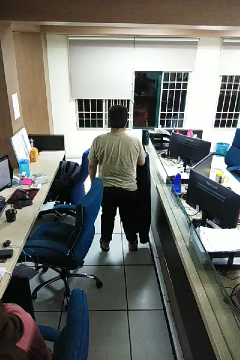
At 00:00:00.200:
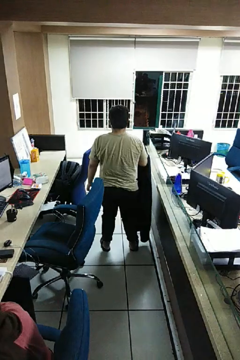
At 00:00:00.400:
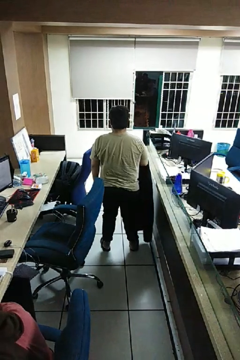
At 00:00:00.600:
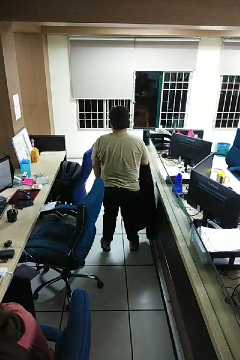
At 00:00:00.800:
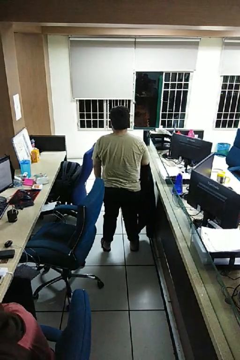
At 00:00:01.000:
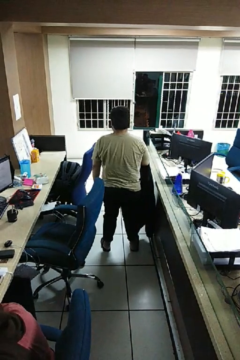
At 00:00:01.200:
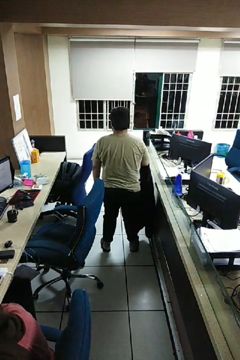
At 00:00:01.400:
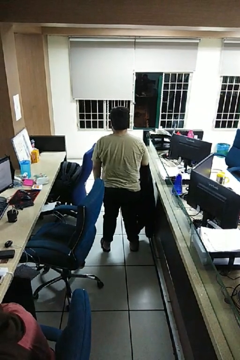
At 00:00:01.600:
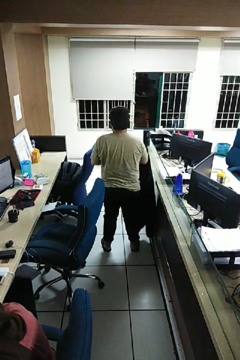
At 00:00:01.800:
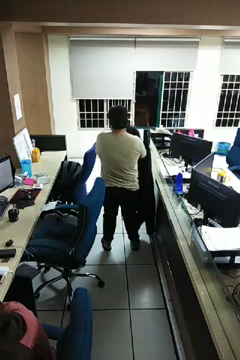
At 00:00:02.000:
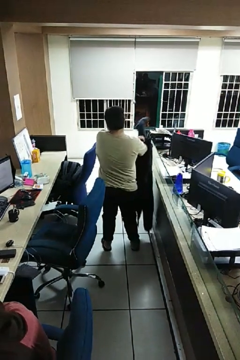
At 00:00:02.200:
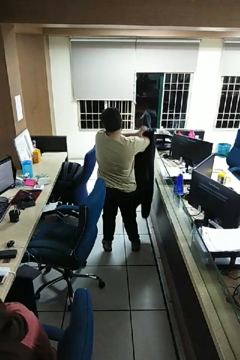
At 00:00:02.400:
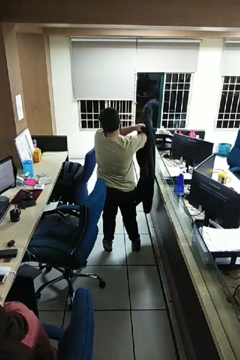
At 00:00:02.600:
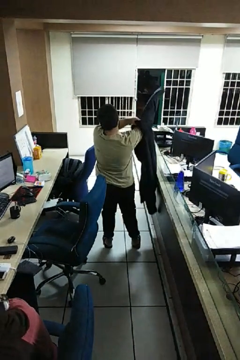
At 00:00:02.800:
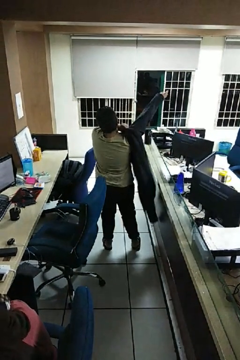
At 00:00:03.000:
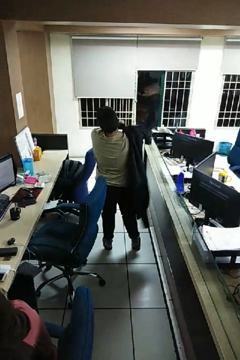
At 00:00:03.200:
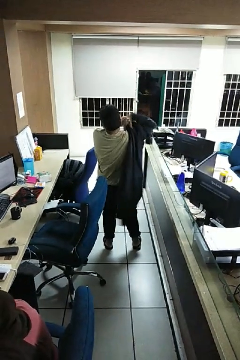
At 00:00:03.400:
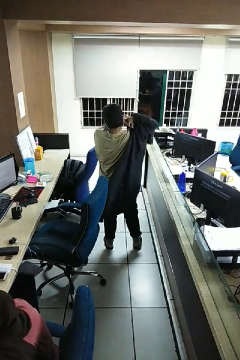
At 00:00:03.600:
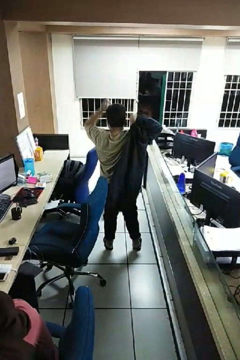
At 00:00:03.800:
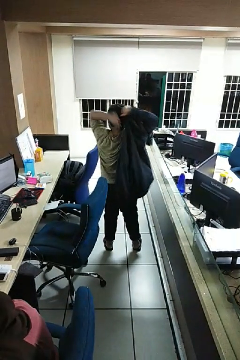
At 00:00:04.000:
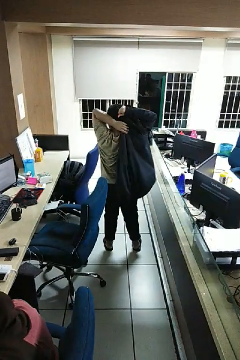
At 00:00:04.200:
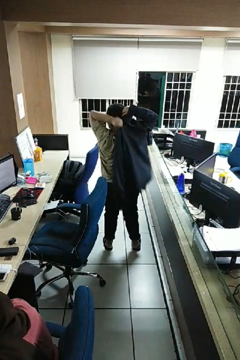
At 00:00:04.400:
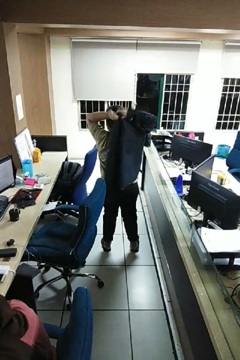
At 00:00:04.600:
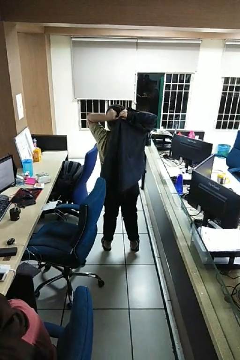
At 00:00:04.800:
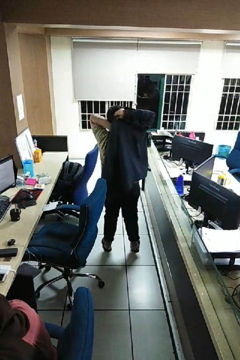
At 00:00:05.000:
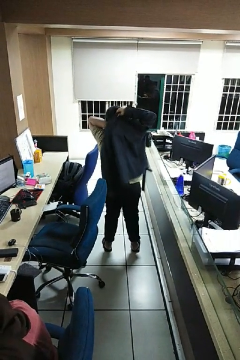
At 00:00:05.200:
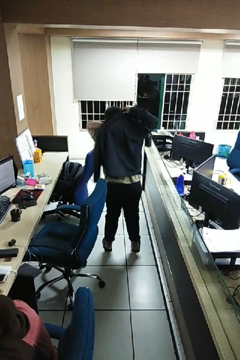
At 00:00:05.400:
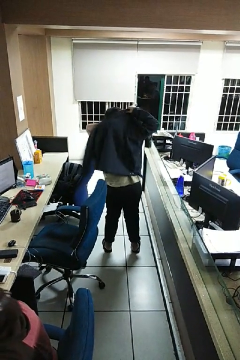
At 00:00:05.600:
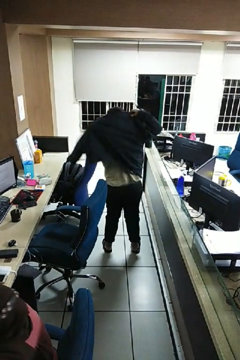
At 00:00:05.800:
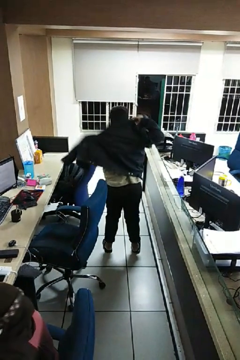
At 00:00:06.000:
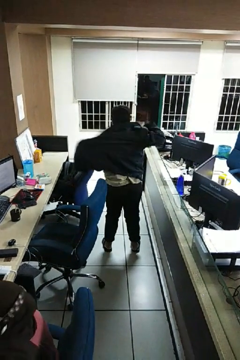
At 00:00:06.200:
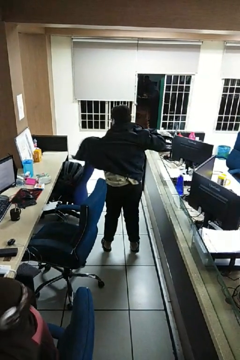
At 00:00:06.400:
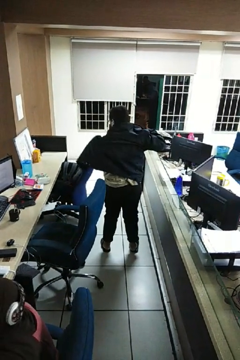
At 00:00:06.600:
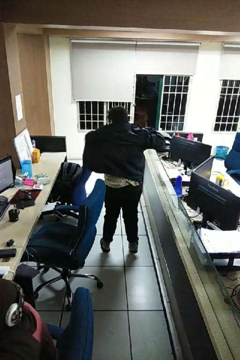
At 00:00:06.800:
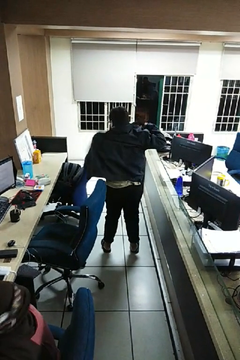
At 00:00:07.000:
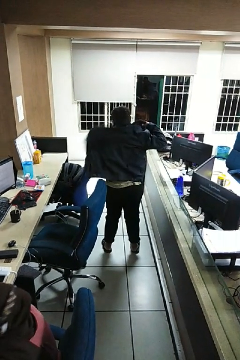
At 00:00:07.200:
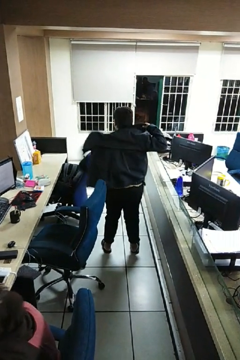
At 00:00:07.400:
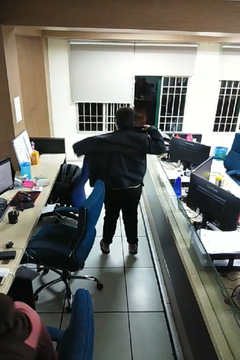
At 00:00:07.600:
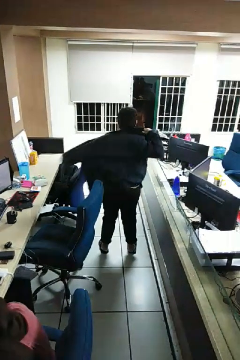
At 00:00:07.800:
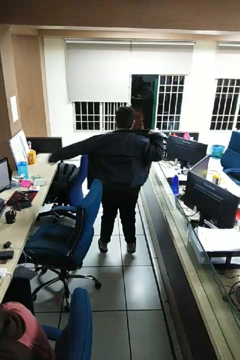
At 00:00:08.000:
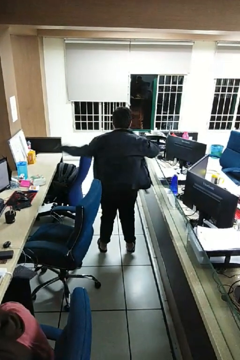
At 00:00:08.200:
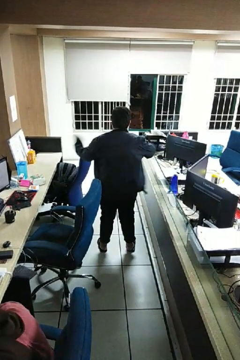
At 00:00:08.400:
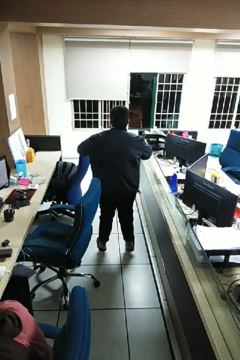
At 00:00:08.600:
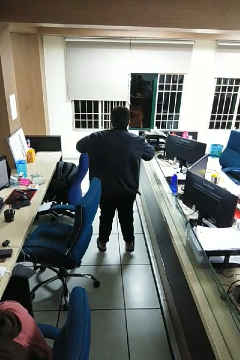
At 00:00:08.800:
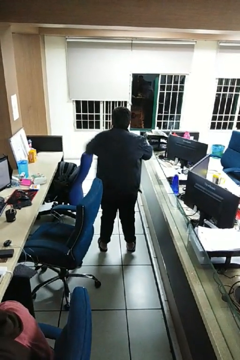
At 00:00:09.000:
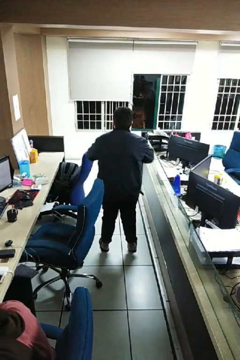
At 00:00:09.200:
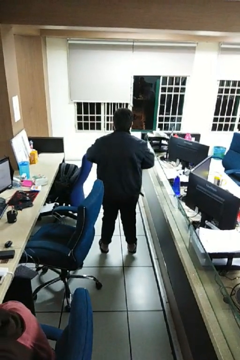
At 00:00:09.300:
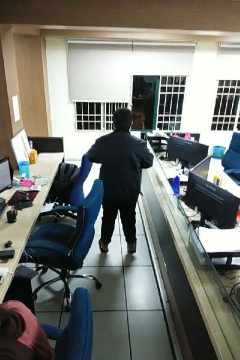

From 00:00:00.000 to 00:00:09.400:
person puts on shirt

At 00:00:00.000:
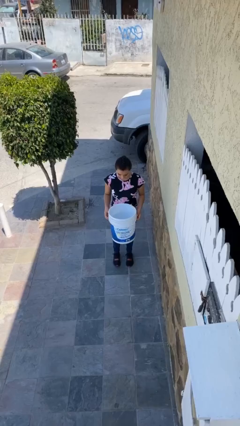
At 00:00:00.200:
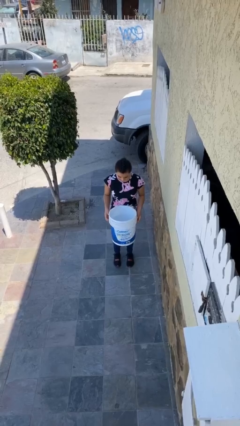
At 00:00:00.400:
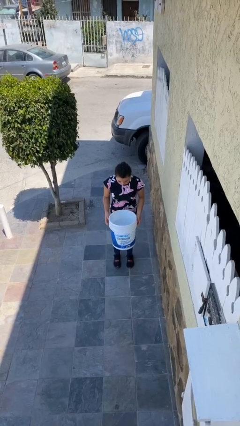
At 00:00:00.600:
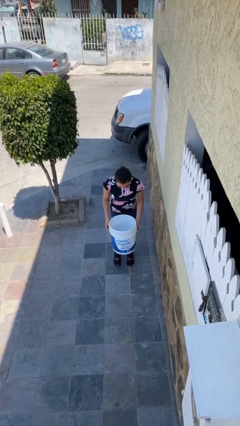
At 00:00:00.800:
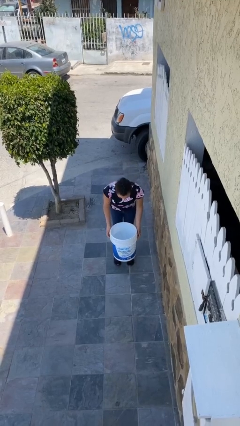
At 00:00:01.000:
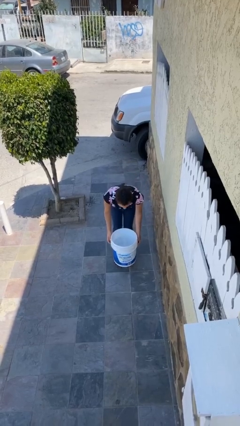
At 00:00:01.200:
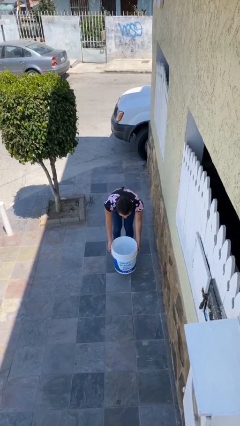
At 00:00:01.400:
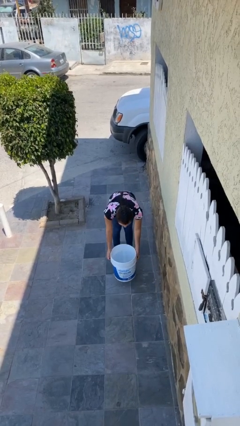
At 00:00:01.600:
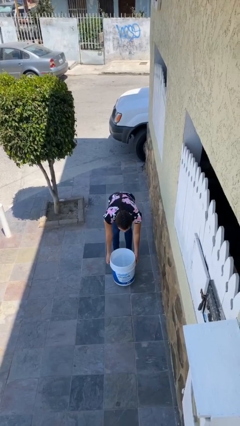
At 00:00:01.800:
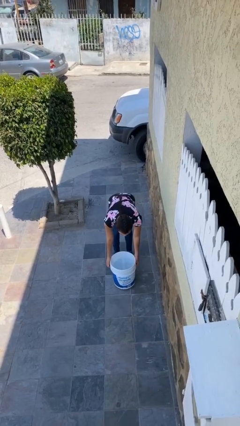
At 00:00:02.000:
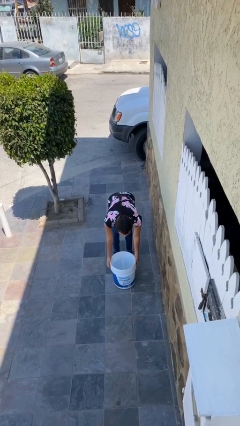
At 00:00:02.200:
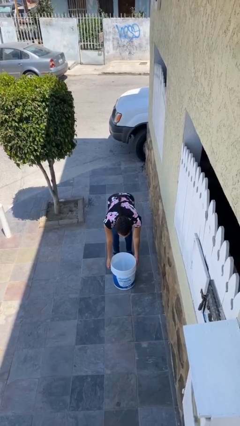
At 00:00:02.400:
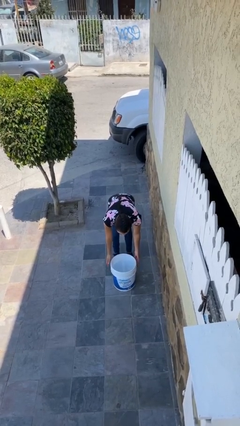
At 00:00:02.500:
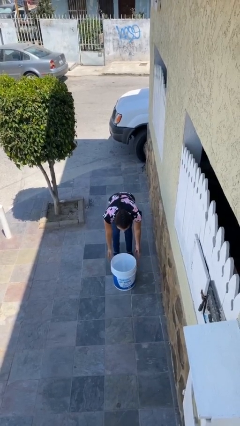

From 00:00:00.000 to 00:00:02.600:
person puts down object on floor

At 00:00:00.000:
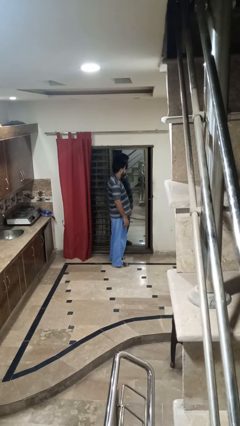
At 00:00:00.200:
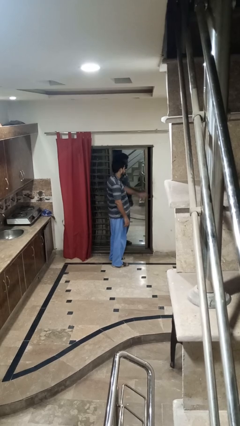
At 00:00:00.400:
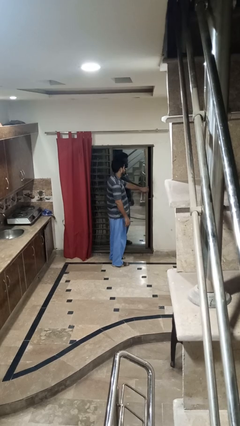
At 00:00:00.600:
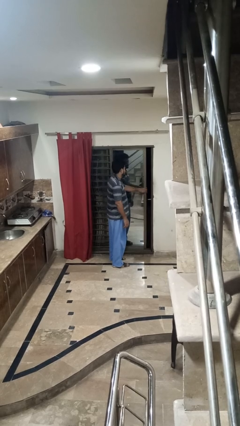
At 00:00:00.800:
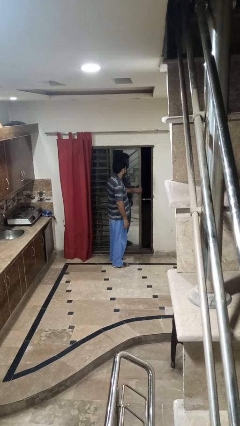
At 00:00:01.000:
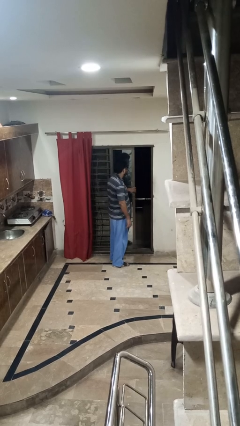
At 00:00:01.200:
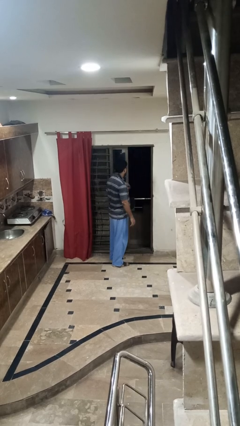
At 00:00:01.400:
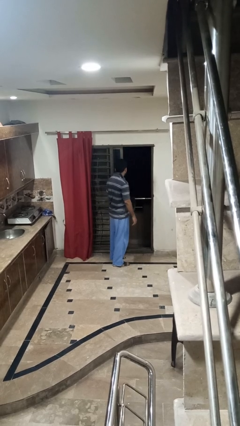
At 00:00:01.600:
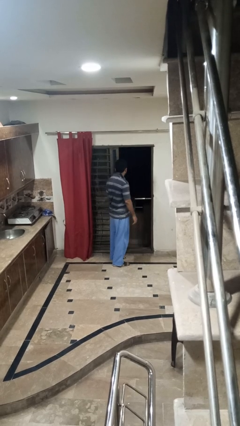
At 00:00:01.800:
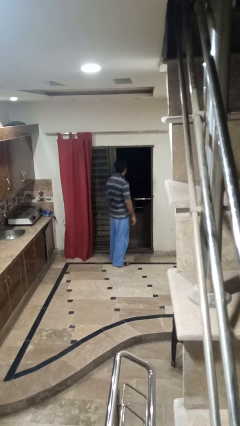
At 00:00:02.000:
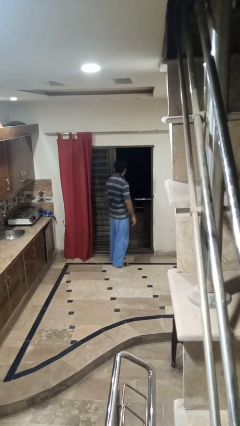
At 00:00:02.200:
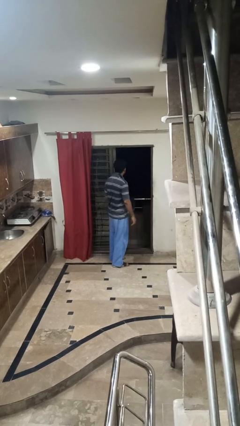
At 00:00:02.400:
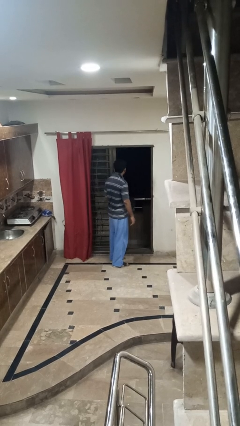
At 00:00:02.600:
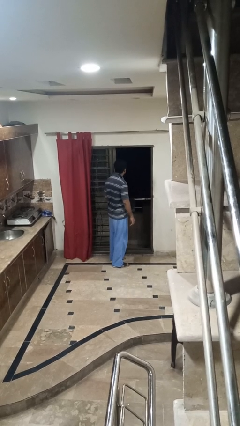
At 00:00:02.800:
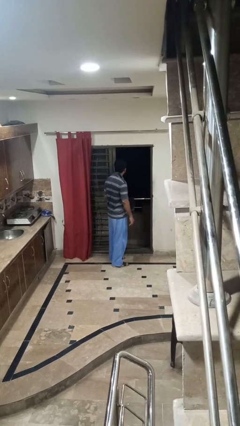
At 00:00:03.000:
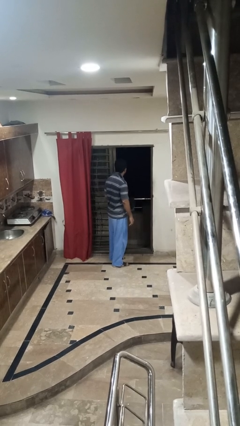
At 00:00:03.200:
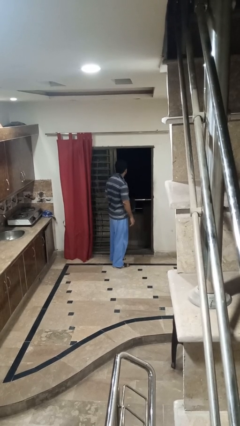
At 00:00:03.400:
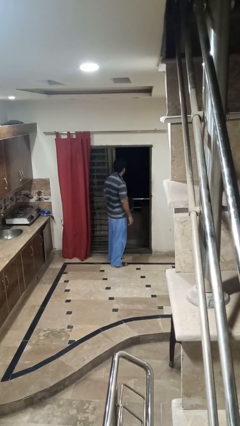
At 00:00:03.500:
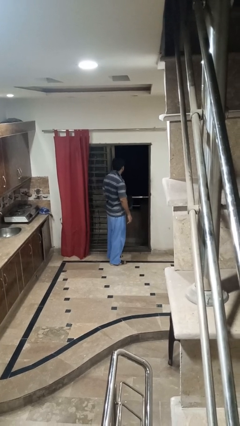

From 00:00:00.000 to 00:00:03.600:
person opens sliding door

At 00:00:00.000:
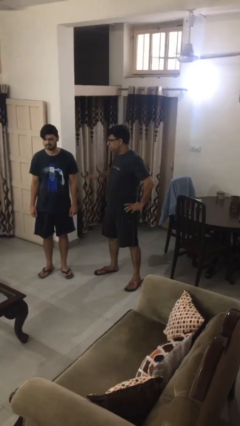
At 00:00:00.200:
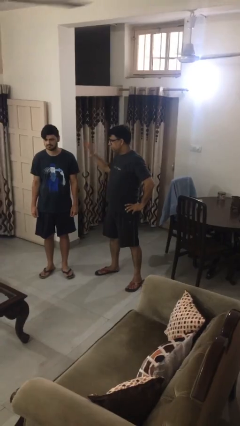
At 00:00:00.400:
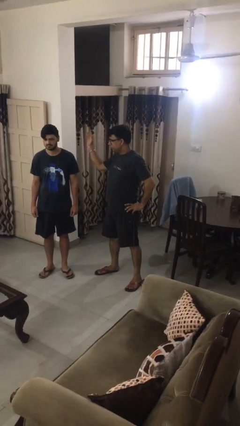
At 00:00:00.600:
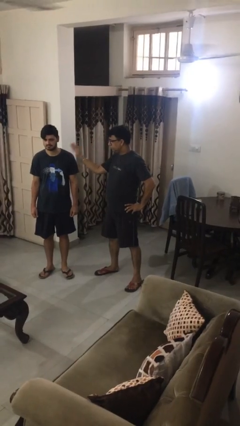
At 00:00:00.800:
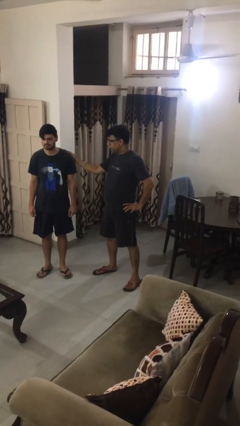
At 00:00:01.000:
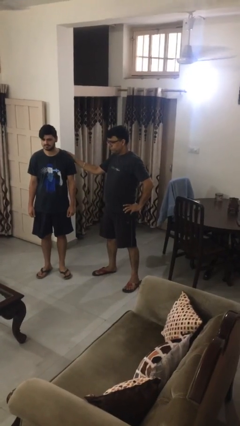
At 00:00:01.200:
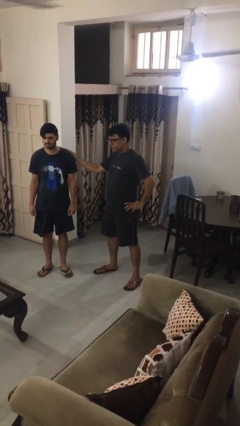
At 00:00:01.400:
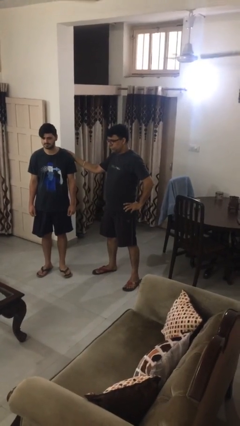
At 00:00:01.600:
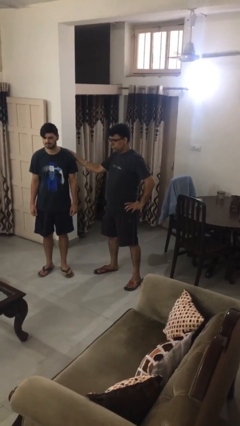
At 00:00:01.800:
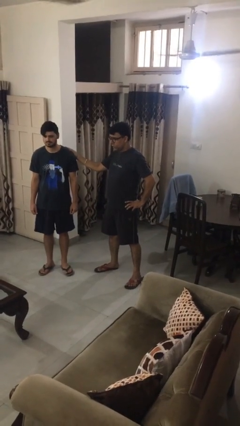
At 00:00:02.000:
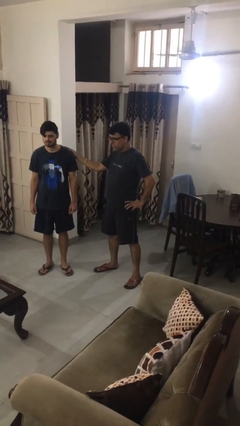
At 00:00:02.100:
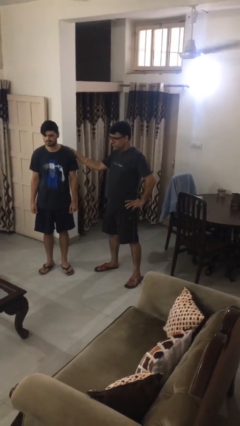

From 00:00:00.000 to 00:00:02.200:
person pounds shoulders of person

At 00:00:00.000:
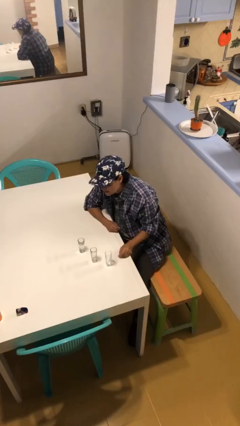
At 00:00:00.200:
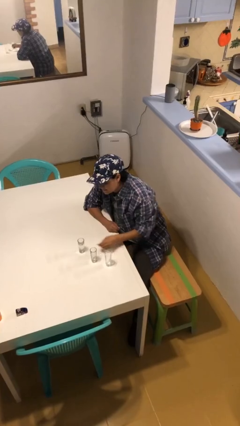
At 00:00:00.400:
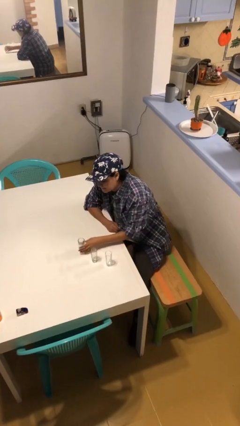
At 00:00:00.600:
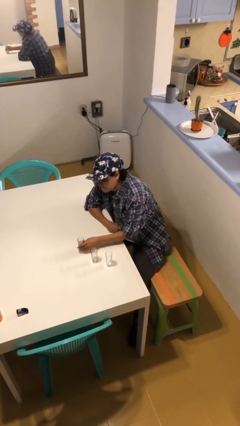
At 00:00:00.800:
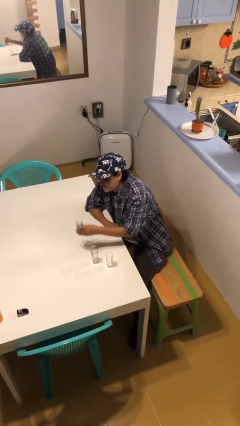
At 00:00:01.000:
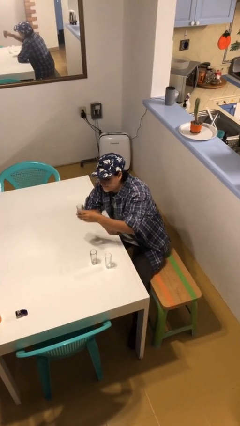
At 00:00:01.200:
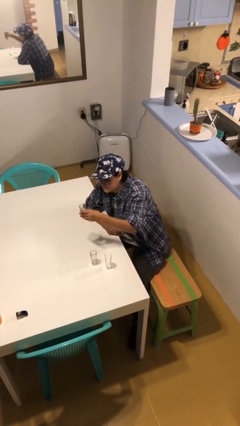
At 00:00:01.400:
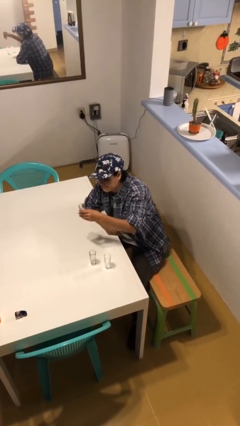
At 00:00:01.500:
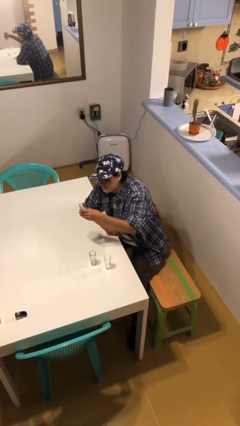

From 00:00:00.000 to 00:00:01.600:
person picks up object from table
